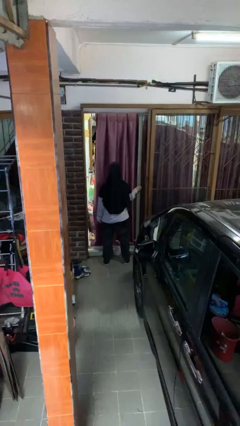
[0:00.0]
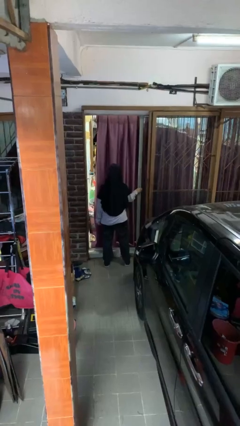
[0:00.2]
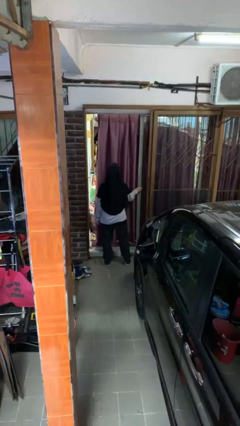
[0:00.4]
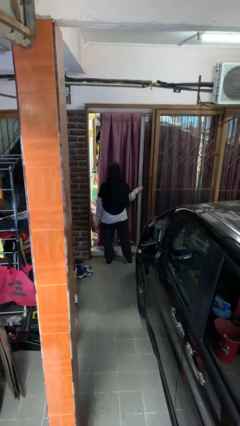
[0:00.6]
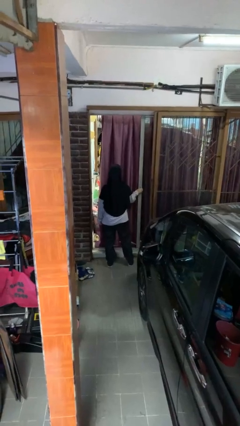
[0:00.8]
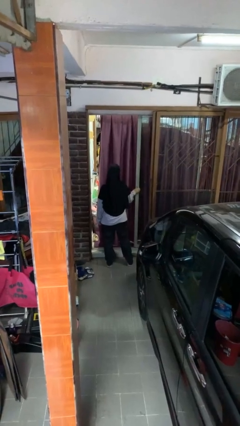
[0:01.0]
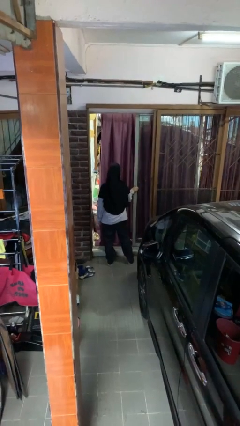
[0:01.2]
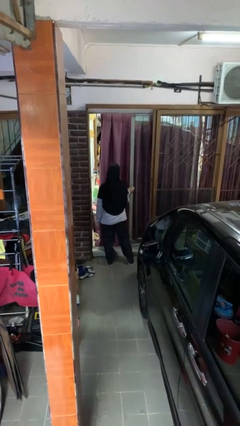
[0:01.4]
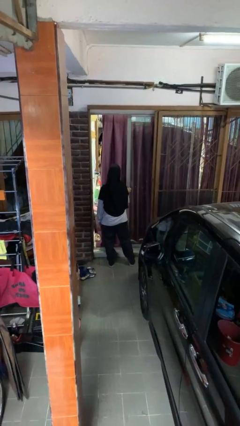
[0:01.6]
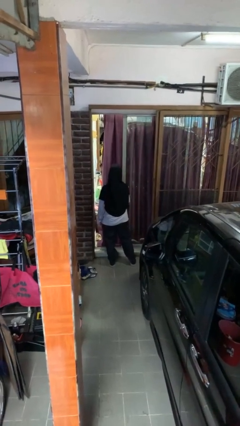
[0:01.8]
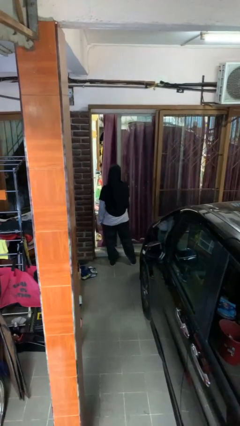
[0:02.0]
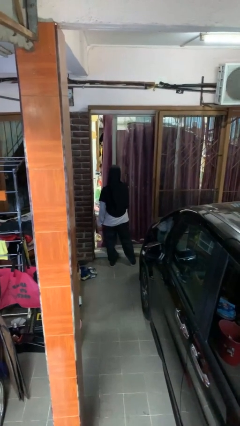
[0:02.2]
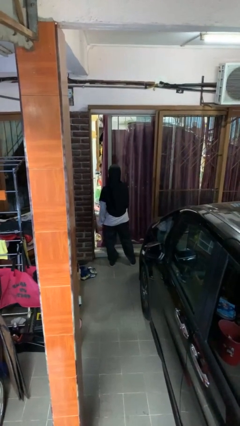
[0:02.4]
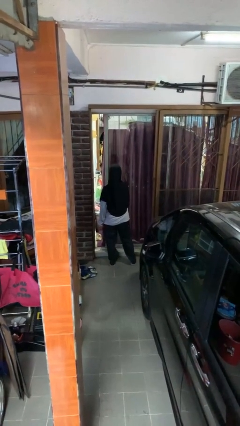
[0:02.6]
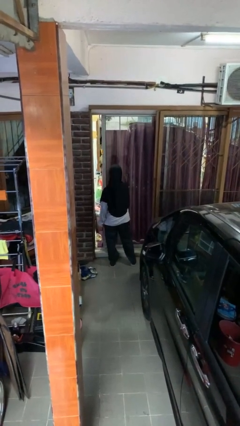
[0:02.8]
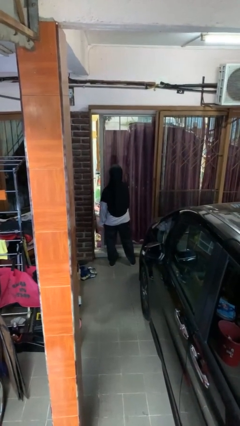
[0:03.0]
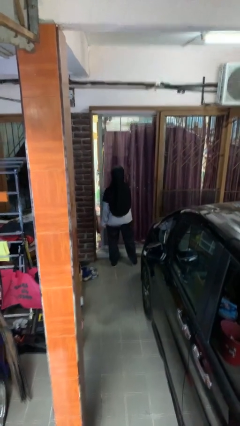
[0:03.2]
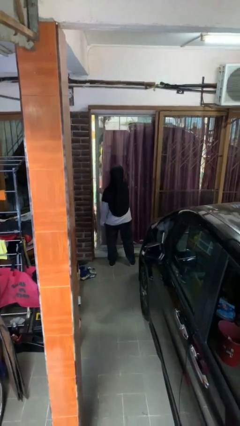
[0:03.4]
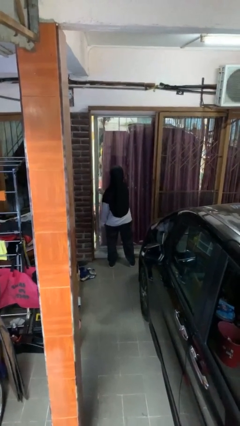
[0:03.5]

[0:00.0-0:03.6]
person closes sliding door

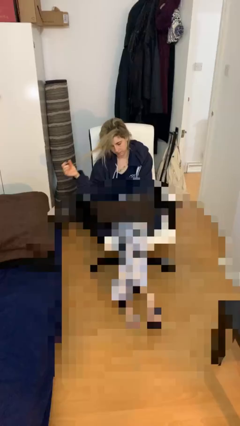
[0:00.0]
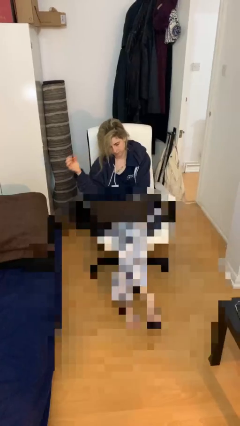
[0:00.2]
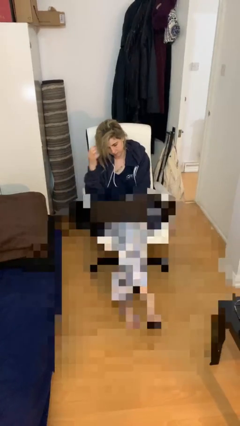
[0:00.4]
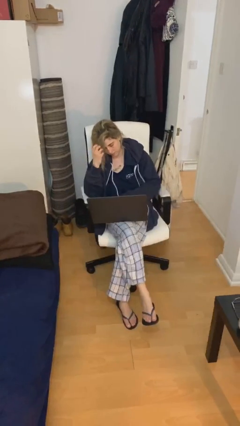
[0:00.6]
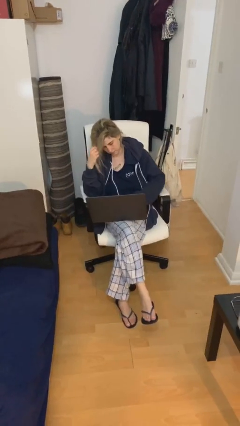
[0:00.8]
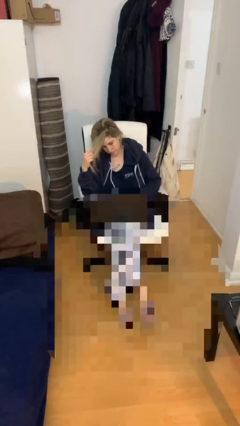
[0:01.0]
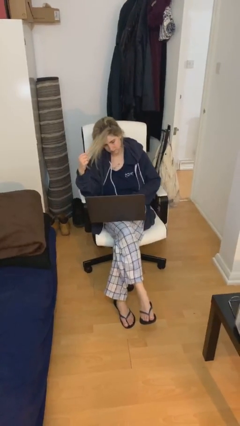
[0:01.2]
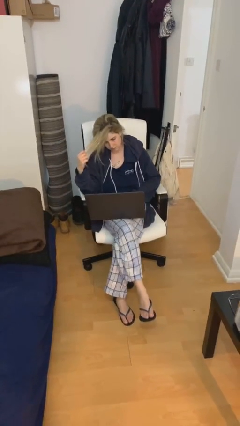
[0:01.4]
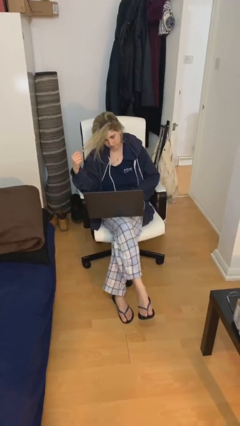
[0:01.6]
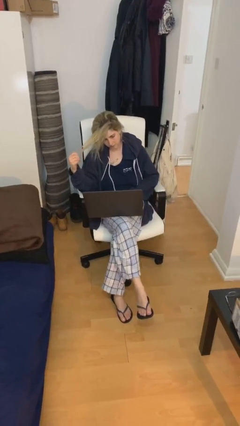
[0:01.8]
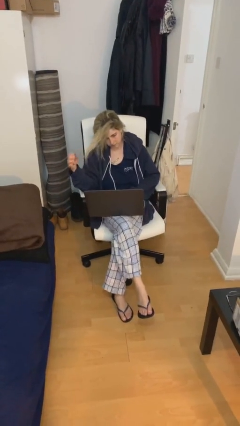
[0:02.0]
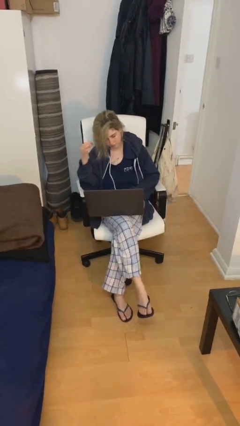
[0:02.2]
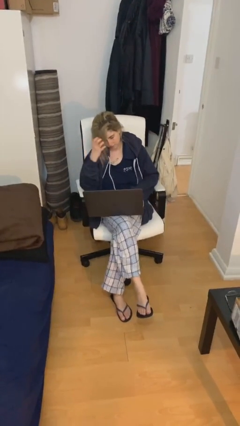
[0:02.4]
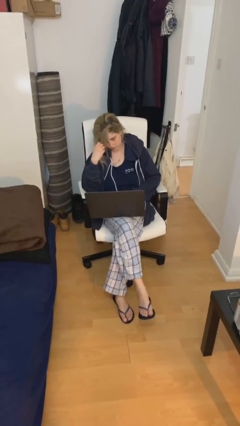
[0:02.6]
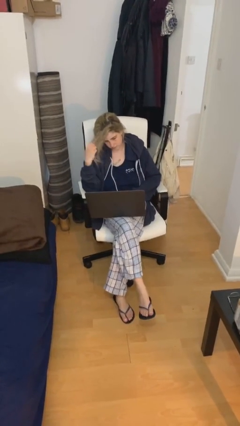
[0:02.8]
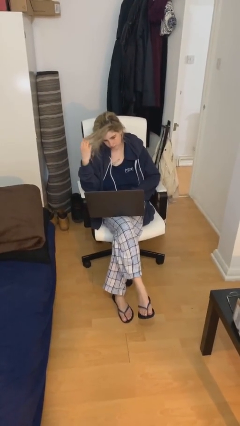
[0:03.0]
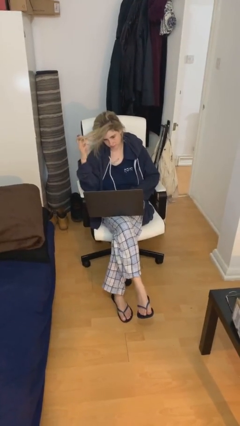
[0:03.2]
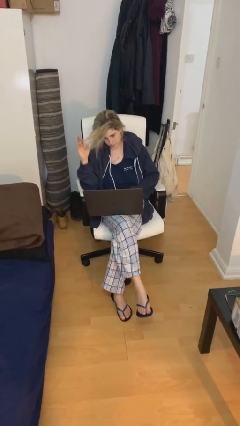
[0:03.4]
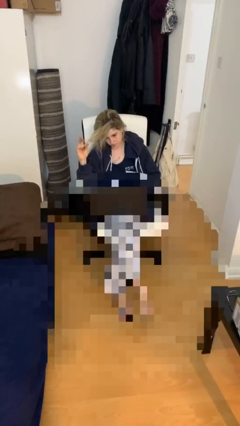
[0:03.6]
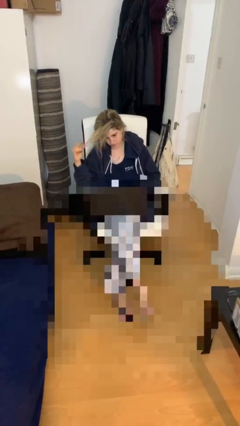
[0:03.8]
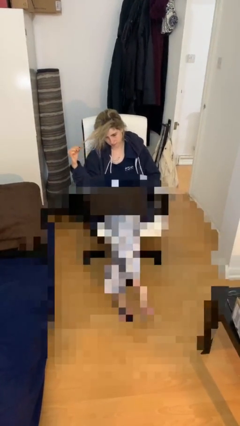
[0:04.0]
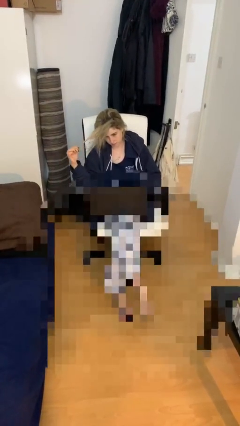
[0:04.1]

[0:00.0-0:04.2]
person interacts with laptop

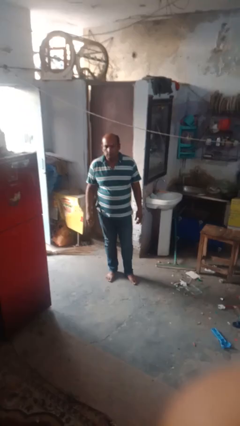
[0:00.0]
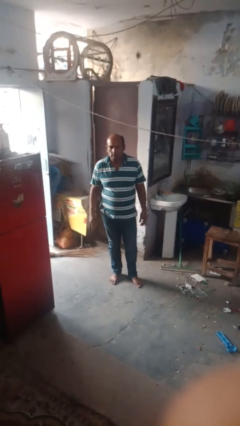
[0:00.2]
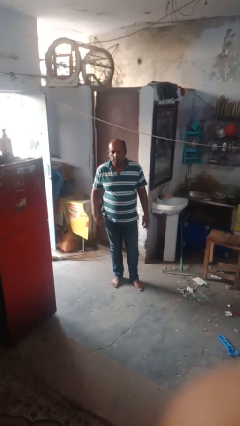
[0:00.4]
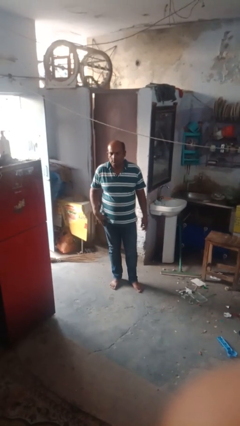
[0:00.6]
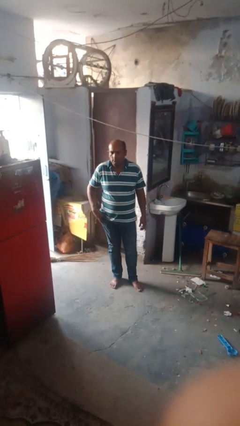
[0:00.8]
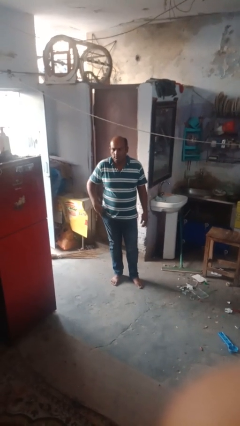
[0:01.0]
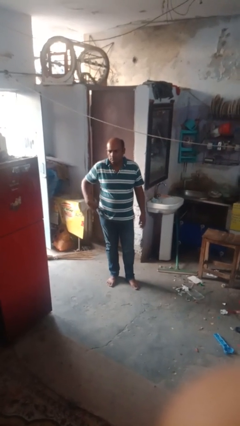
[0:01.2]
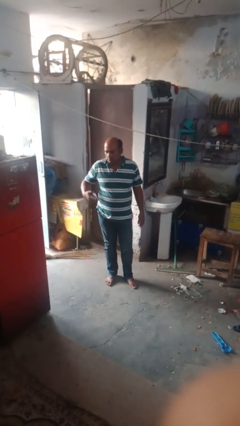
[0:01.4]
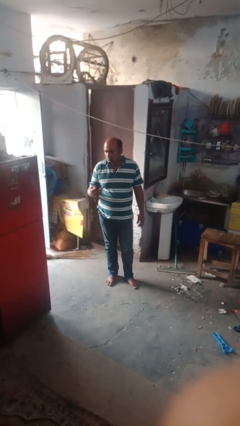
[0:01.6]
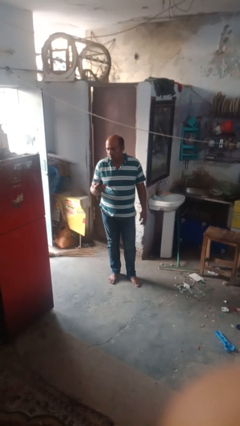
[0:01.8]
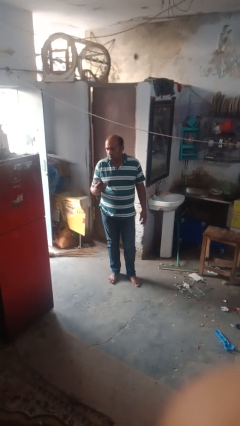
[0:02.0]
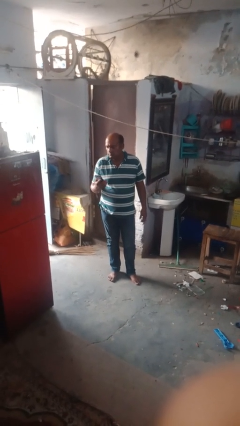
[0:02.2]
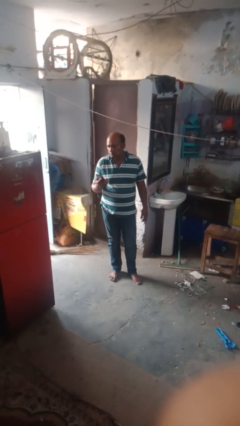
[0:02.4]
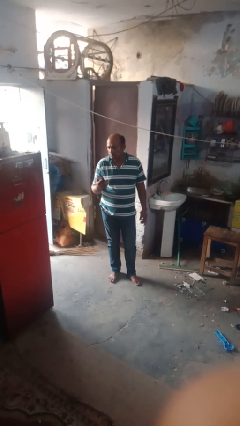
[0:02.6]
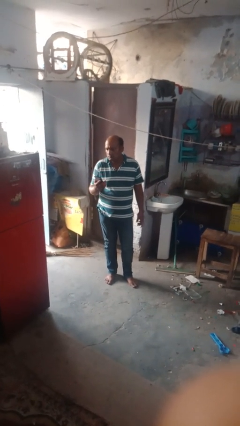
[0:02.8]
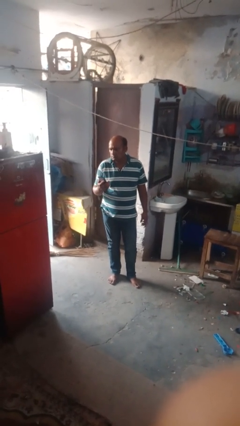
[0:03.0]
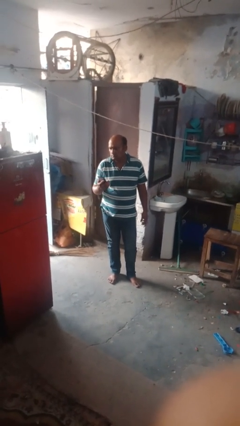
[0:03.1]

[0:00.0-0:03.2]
person takes phone from pocket

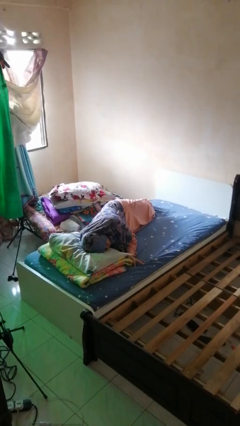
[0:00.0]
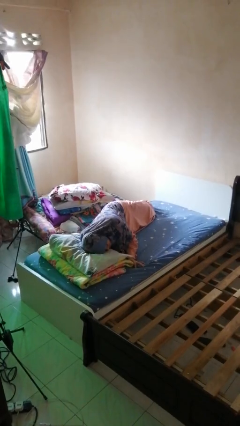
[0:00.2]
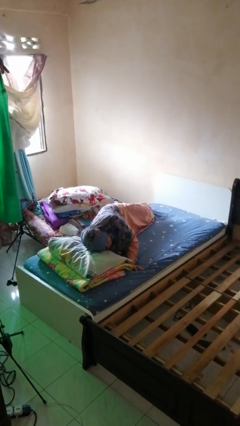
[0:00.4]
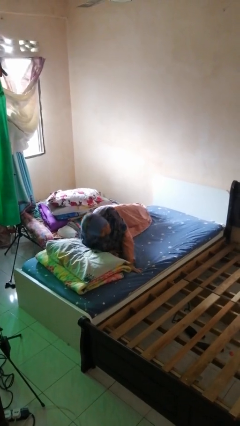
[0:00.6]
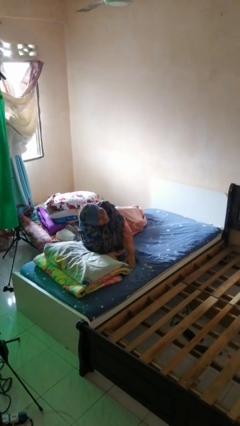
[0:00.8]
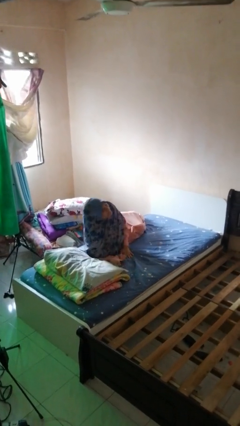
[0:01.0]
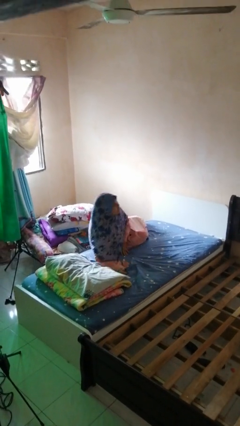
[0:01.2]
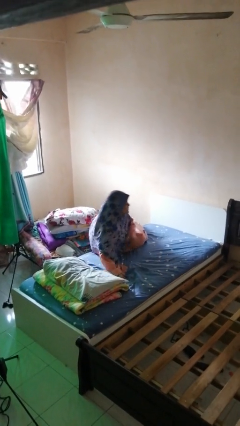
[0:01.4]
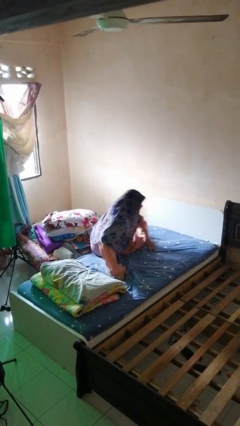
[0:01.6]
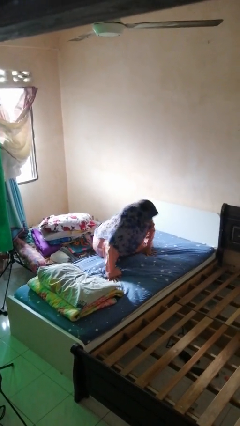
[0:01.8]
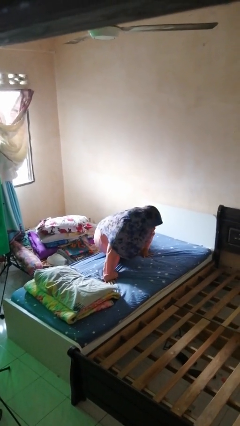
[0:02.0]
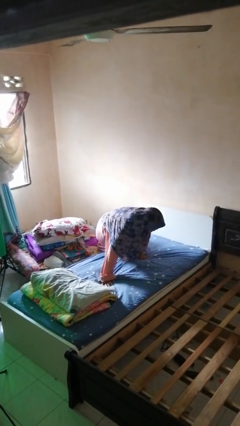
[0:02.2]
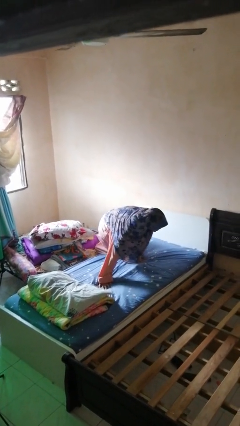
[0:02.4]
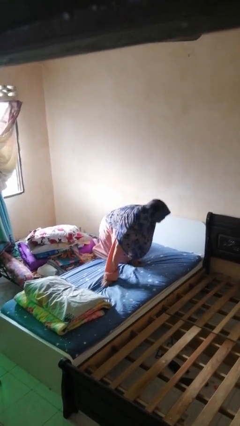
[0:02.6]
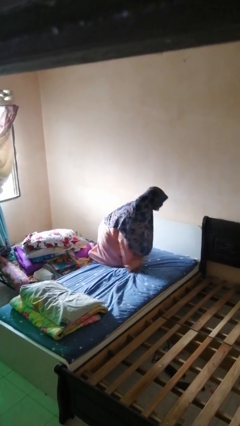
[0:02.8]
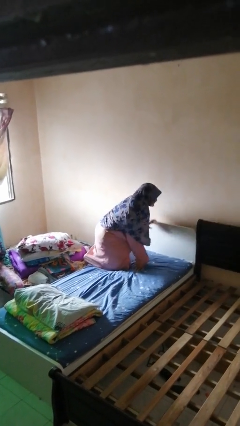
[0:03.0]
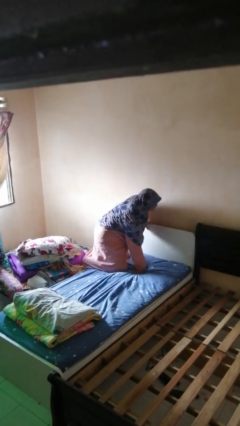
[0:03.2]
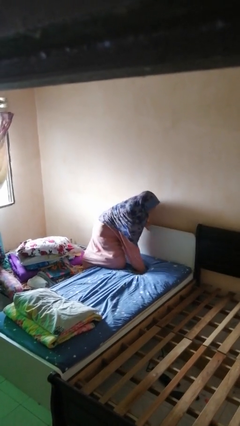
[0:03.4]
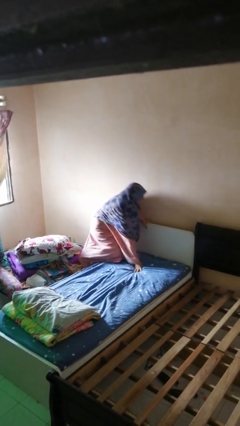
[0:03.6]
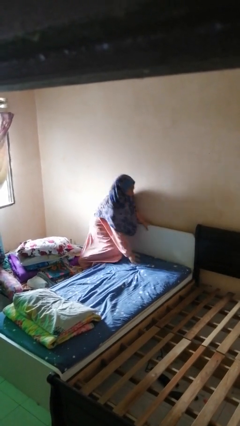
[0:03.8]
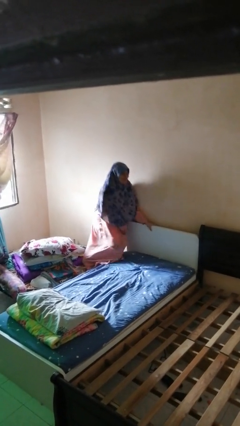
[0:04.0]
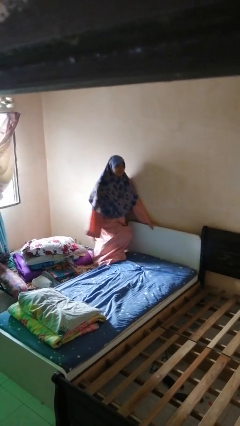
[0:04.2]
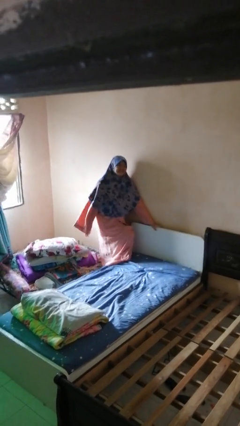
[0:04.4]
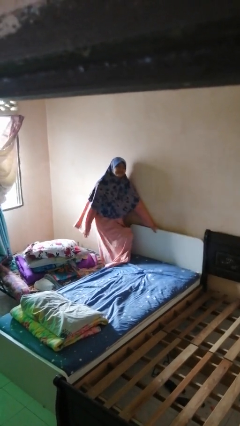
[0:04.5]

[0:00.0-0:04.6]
person stands up

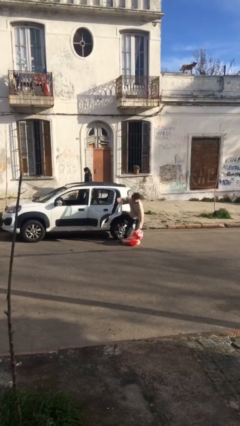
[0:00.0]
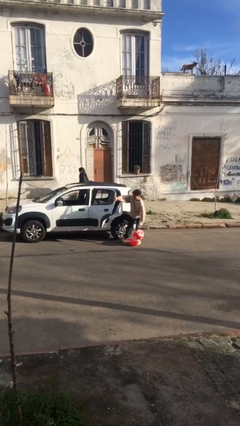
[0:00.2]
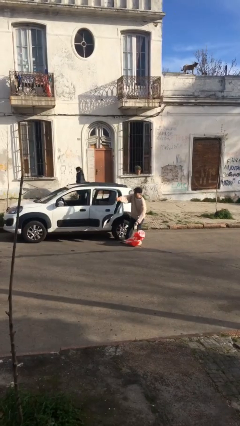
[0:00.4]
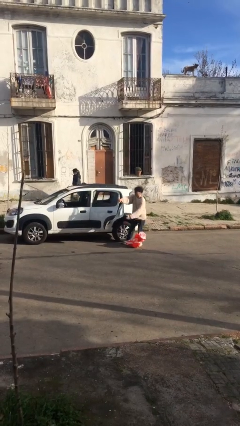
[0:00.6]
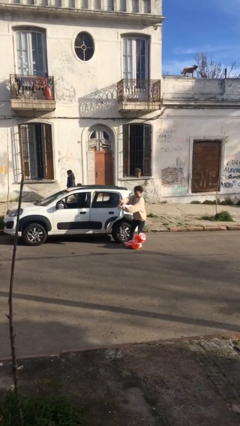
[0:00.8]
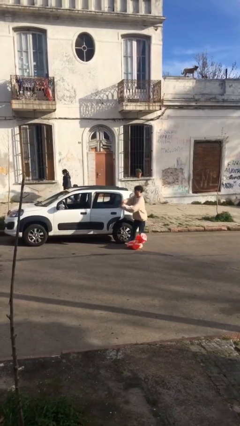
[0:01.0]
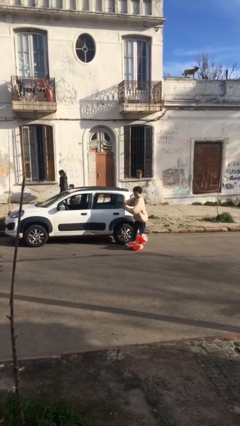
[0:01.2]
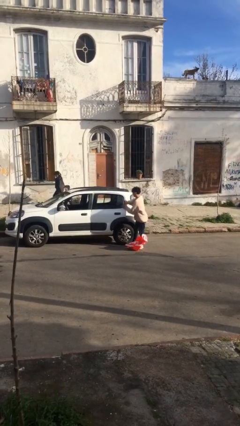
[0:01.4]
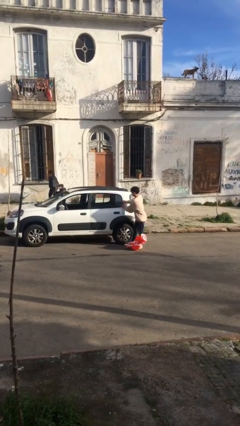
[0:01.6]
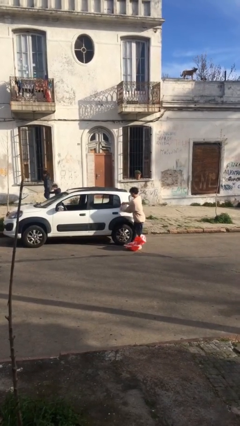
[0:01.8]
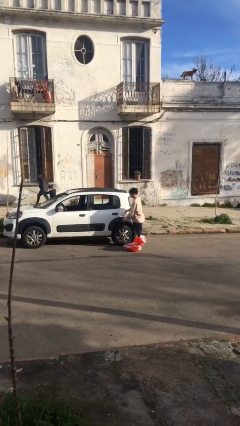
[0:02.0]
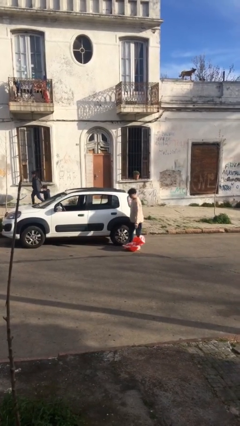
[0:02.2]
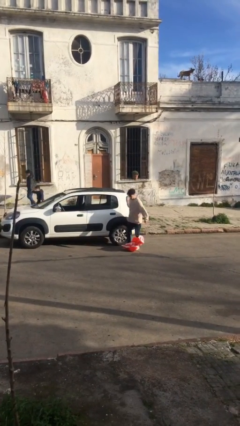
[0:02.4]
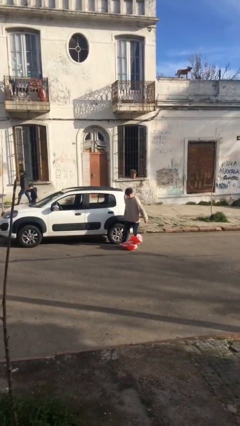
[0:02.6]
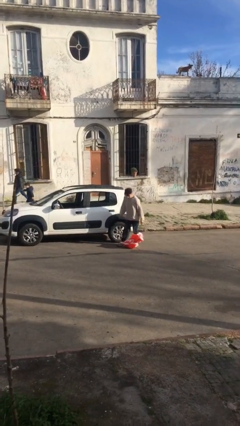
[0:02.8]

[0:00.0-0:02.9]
person closes car door
